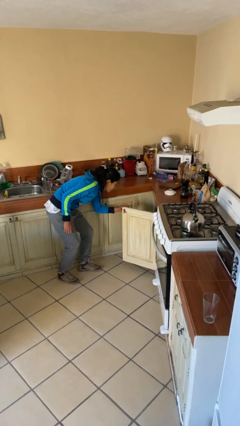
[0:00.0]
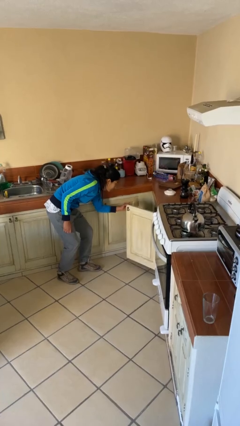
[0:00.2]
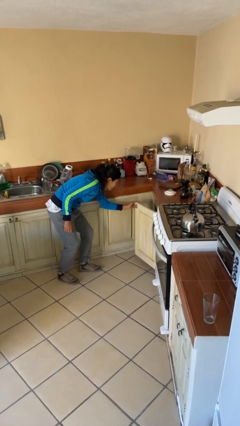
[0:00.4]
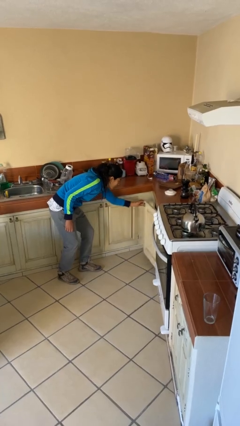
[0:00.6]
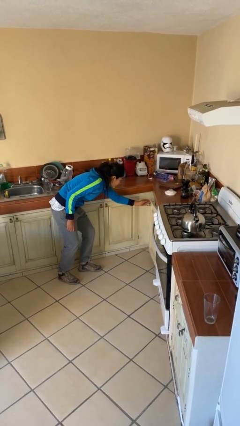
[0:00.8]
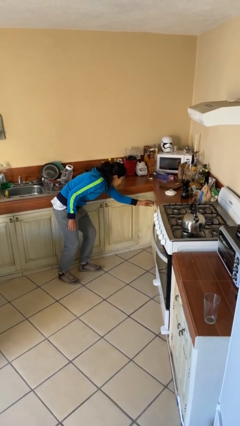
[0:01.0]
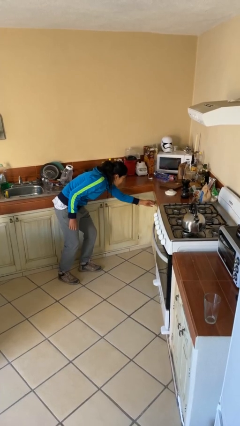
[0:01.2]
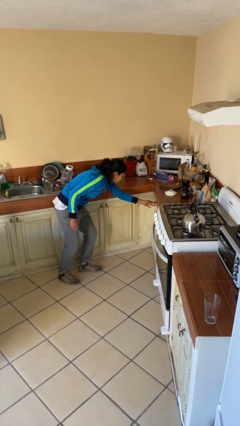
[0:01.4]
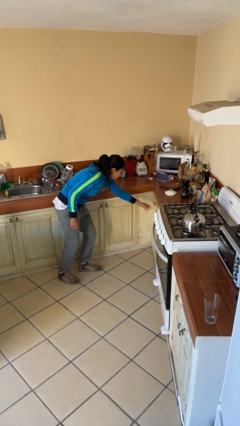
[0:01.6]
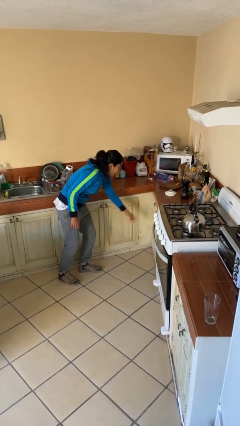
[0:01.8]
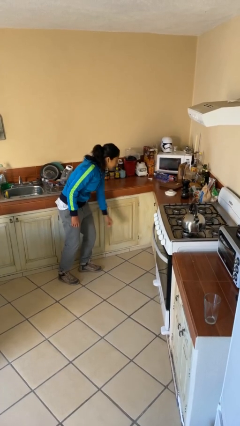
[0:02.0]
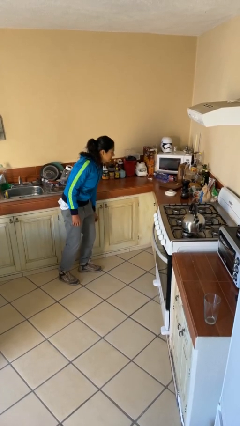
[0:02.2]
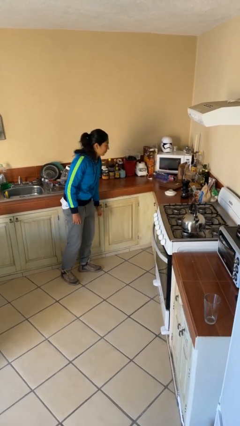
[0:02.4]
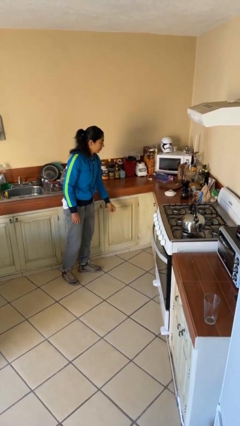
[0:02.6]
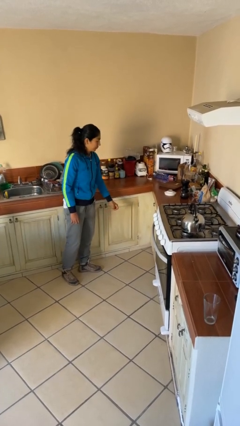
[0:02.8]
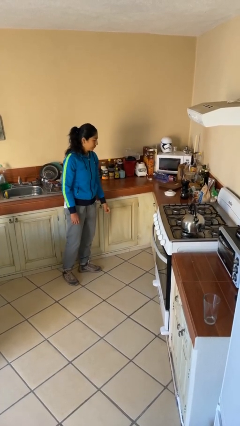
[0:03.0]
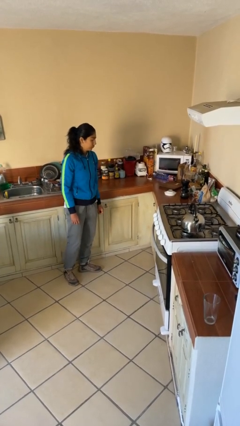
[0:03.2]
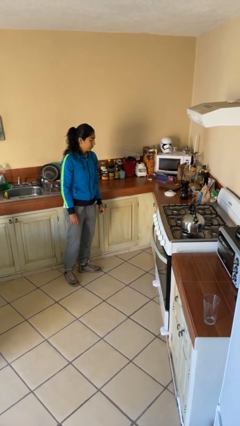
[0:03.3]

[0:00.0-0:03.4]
person closes cabinet

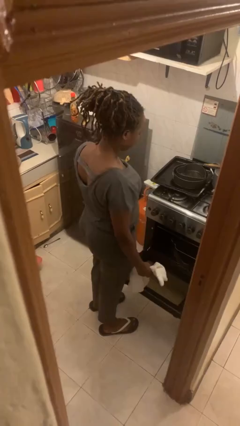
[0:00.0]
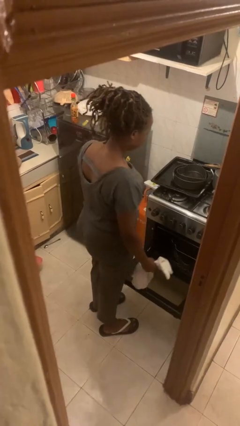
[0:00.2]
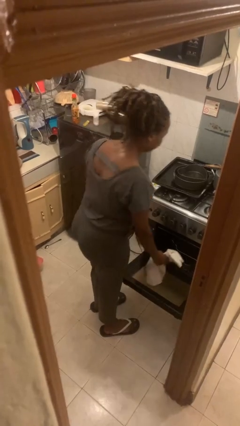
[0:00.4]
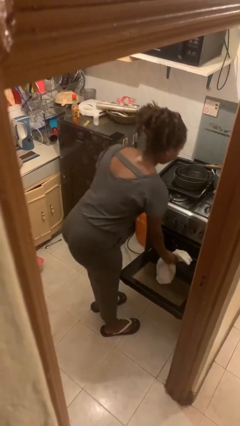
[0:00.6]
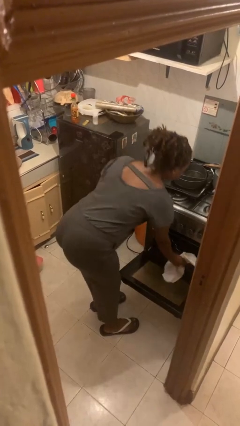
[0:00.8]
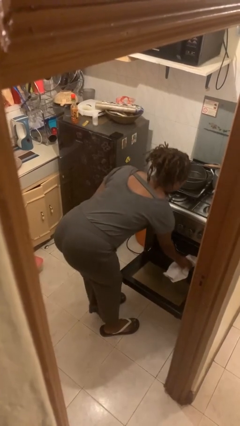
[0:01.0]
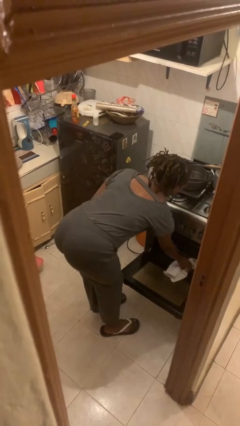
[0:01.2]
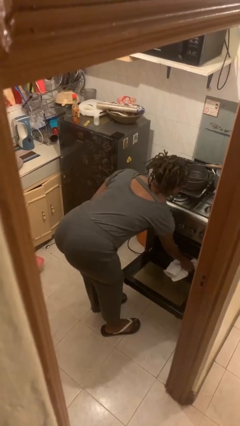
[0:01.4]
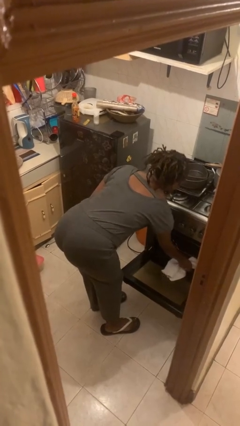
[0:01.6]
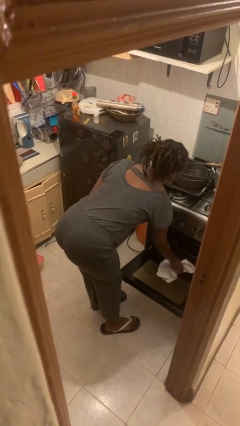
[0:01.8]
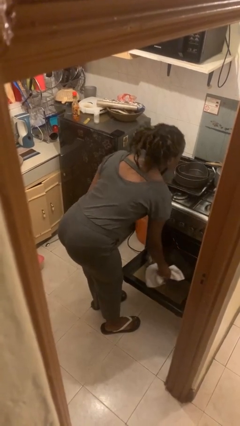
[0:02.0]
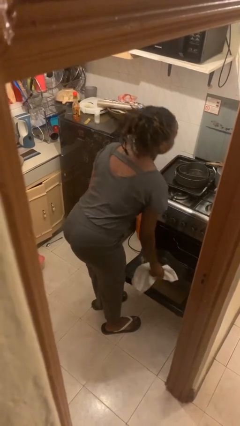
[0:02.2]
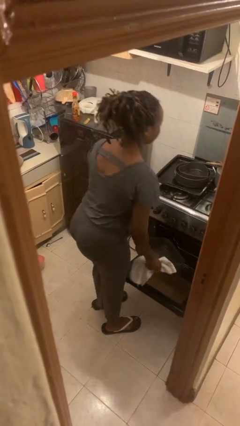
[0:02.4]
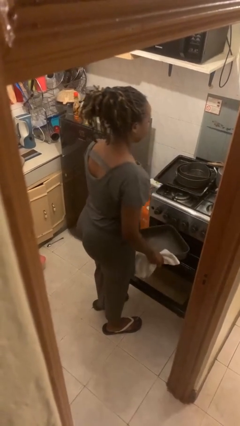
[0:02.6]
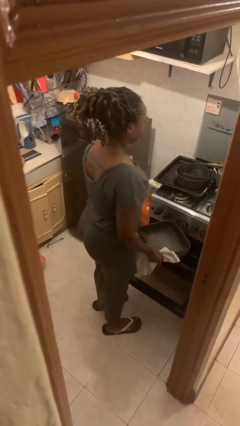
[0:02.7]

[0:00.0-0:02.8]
person takes object from oven

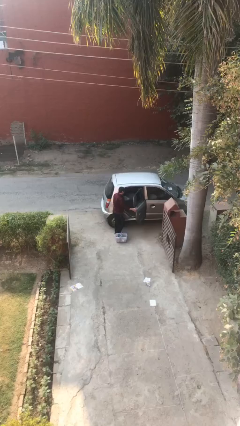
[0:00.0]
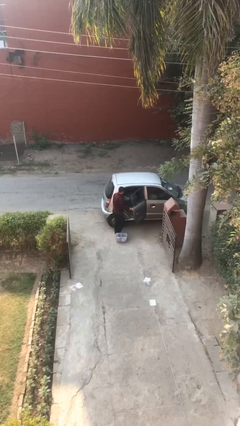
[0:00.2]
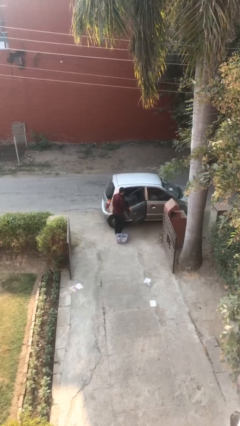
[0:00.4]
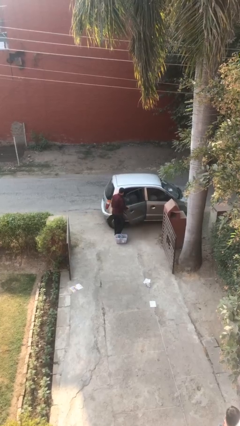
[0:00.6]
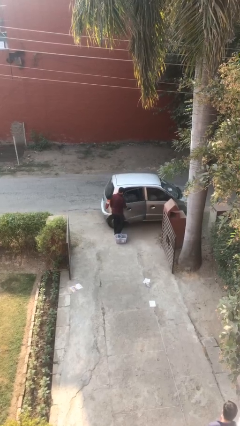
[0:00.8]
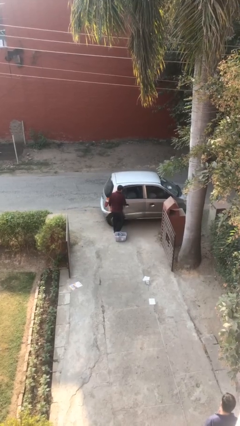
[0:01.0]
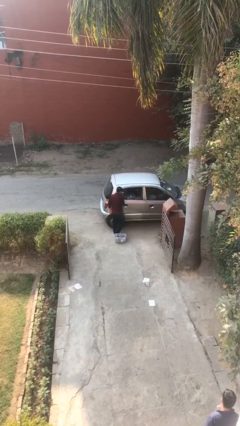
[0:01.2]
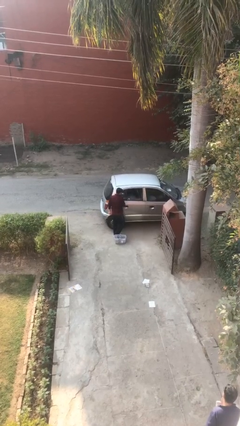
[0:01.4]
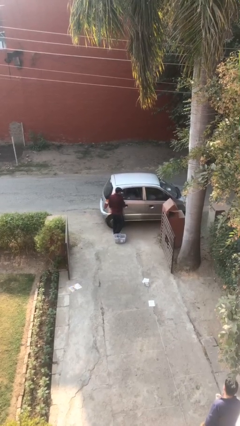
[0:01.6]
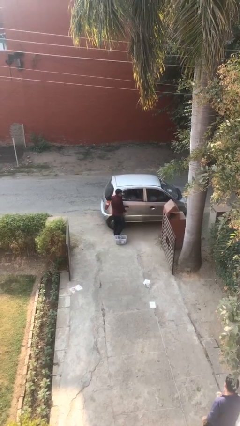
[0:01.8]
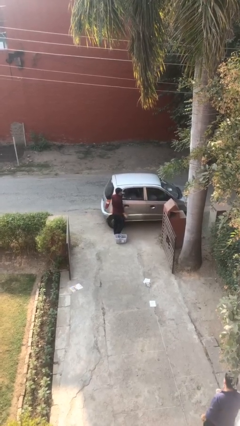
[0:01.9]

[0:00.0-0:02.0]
person closes car door

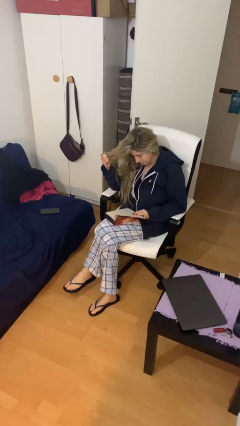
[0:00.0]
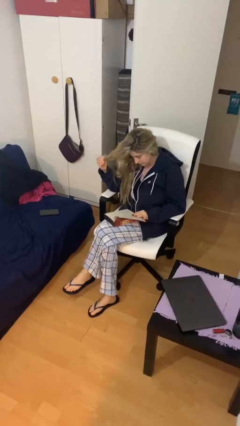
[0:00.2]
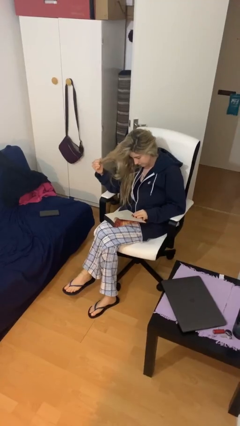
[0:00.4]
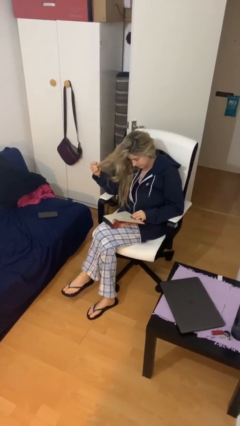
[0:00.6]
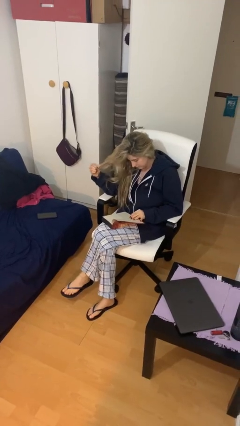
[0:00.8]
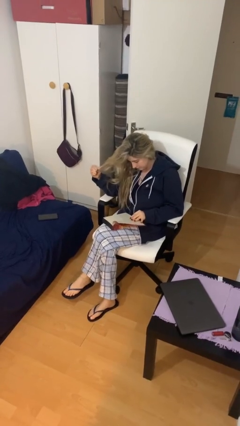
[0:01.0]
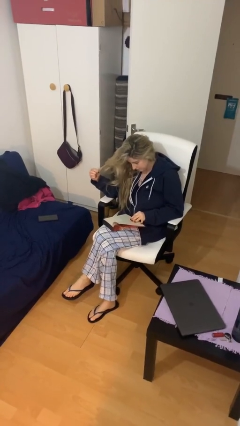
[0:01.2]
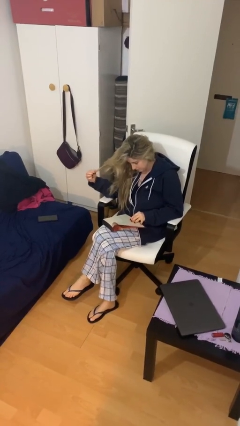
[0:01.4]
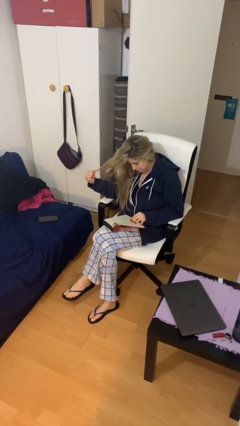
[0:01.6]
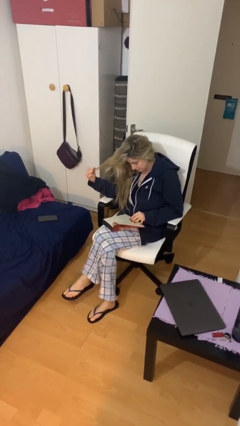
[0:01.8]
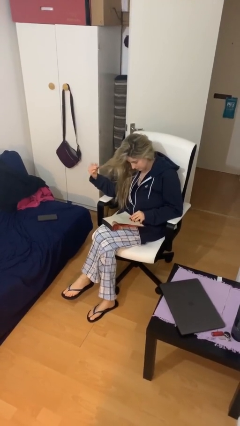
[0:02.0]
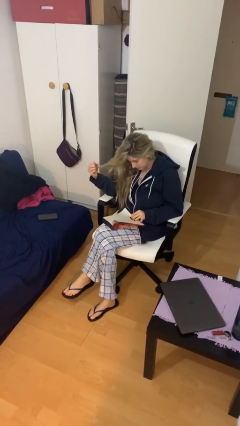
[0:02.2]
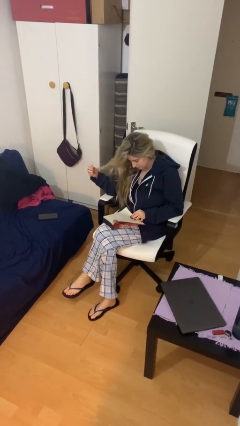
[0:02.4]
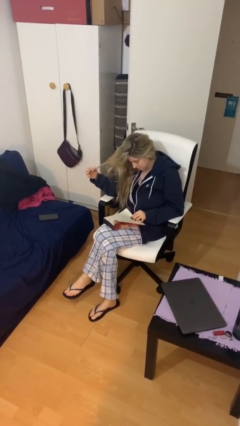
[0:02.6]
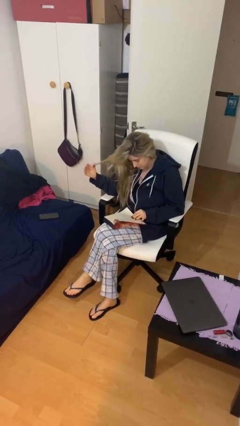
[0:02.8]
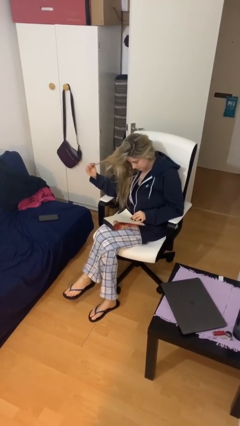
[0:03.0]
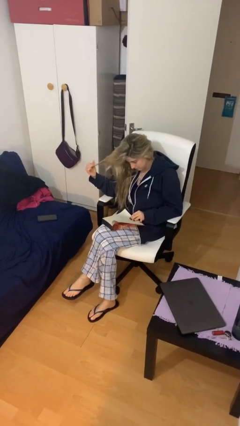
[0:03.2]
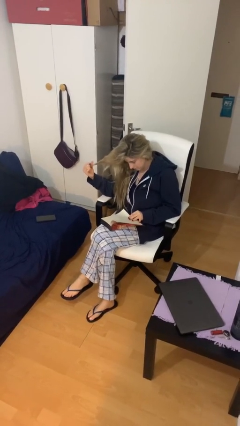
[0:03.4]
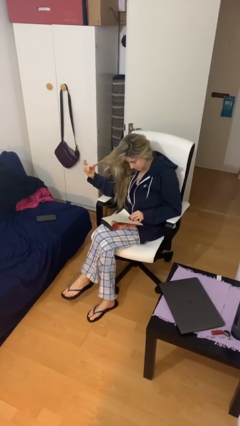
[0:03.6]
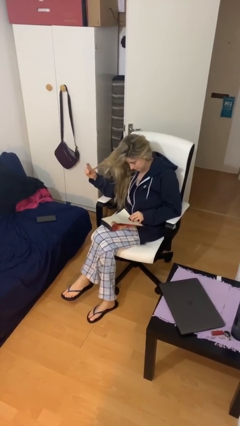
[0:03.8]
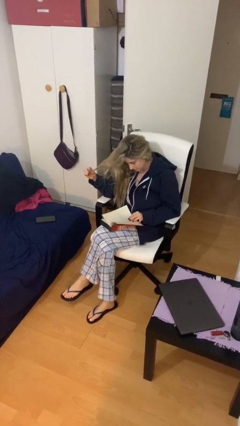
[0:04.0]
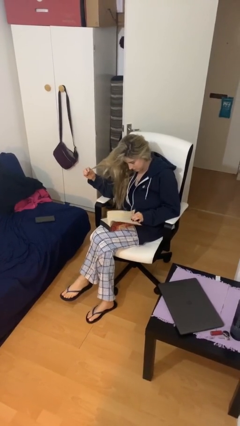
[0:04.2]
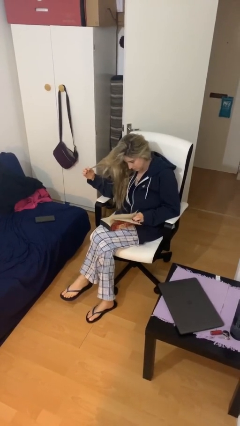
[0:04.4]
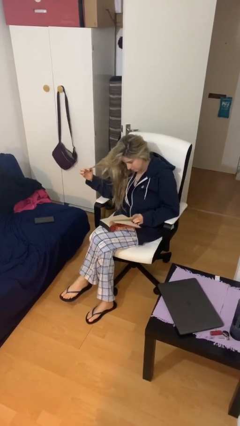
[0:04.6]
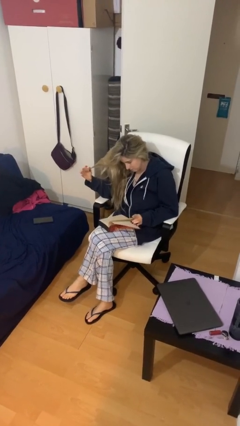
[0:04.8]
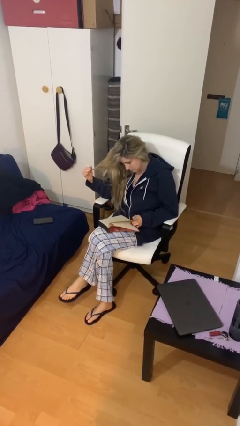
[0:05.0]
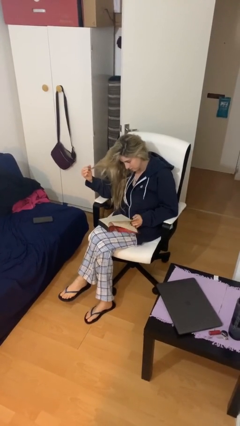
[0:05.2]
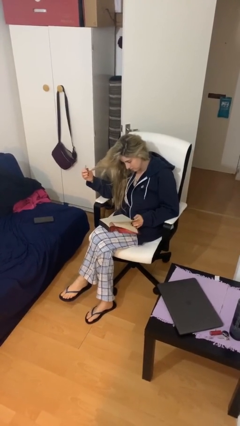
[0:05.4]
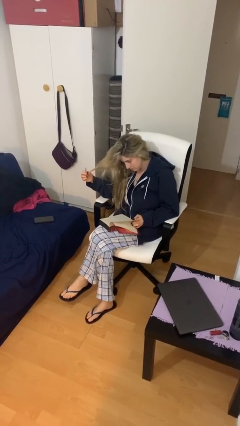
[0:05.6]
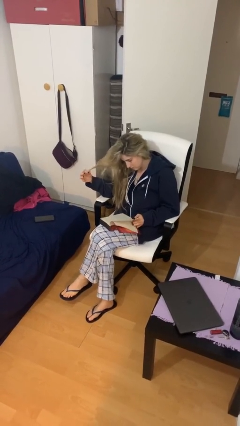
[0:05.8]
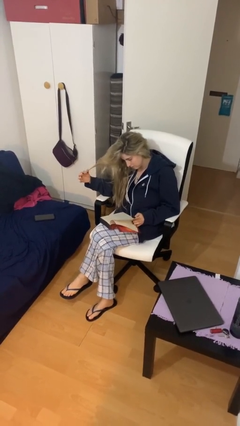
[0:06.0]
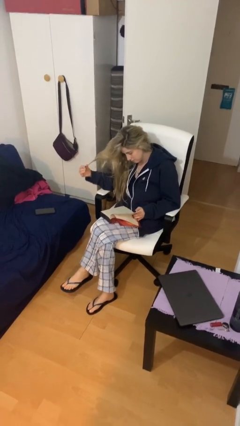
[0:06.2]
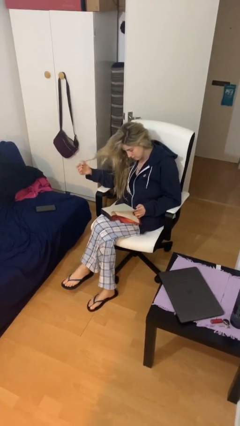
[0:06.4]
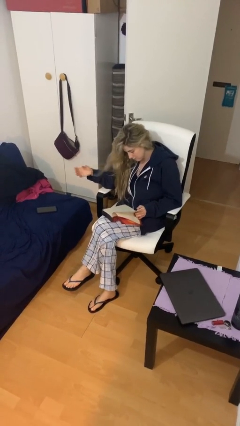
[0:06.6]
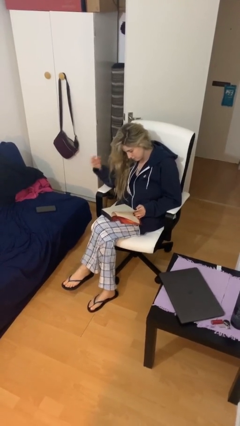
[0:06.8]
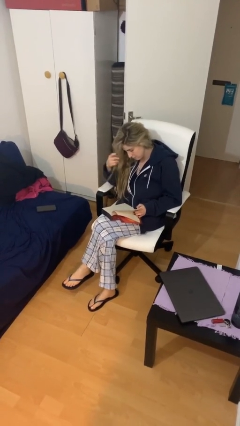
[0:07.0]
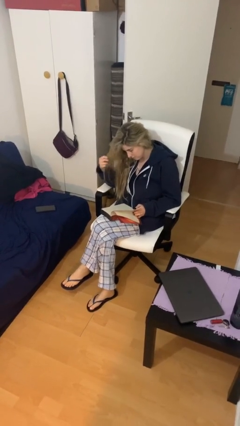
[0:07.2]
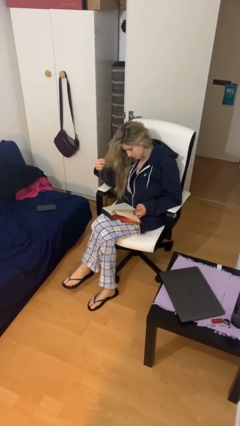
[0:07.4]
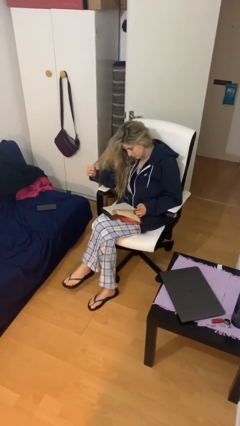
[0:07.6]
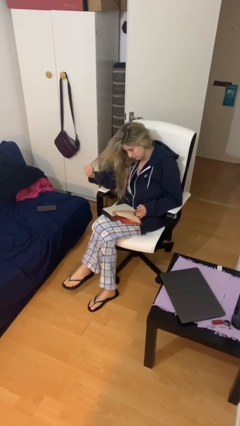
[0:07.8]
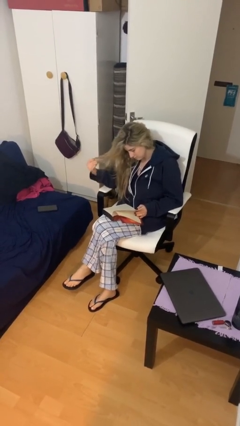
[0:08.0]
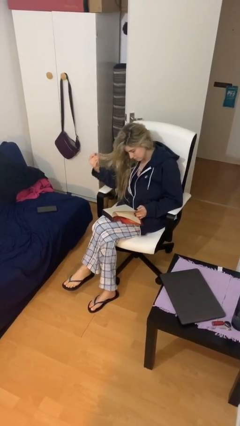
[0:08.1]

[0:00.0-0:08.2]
person reads document

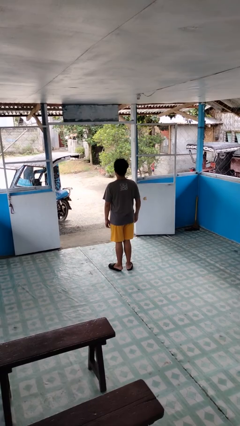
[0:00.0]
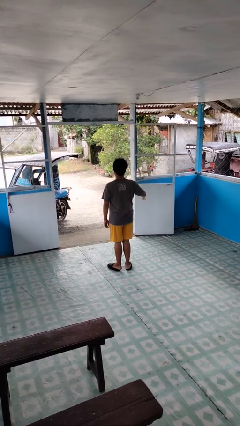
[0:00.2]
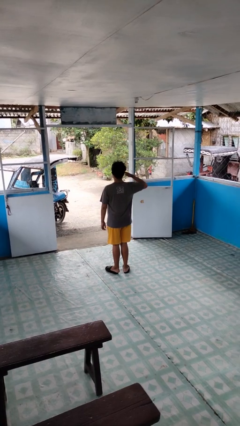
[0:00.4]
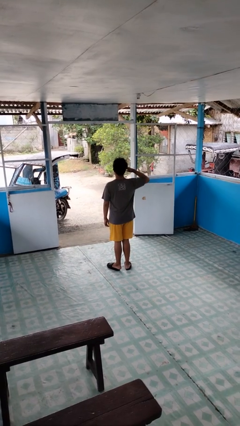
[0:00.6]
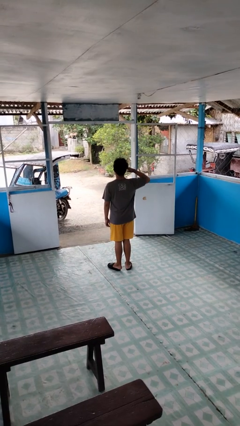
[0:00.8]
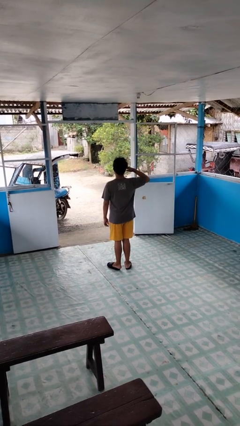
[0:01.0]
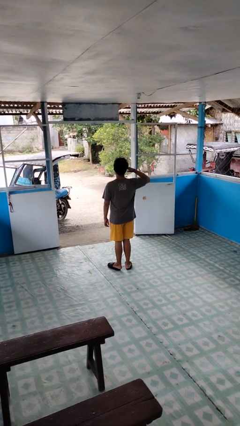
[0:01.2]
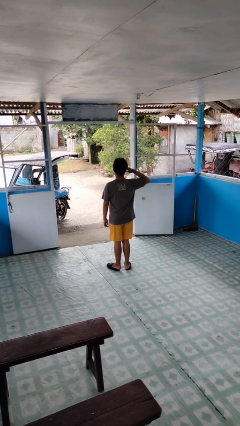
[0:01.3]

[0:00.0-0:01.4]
person salutes

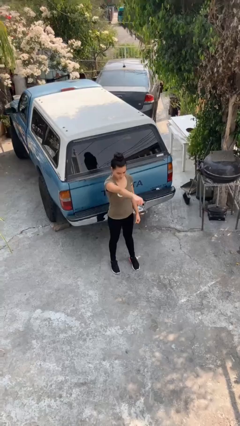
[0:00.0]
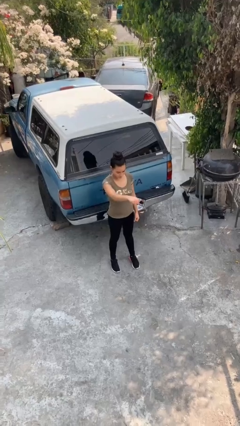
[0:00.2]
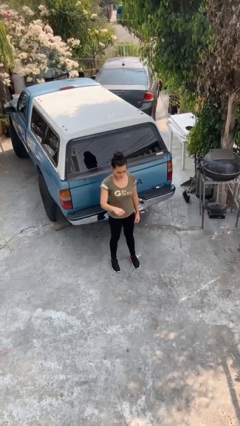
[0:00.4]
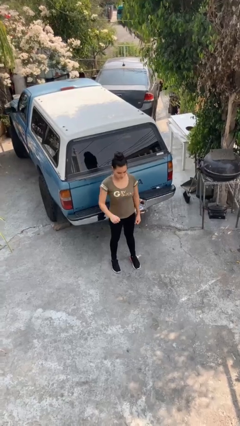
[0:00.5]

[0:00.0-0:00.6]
person punches
